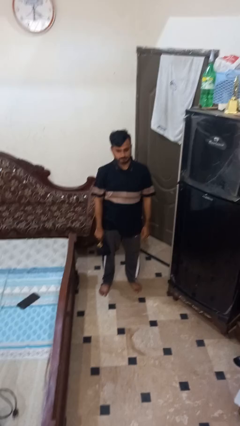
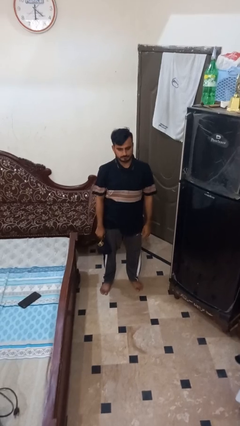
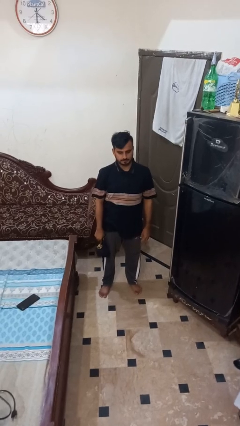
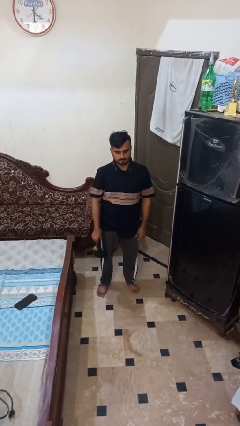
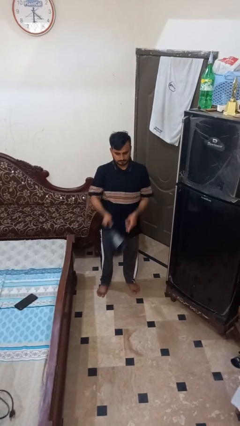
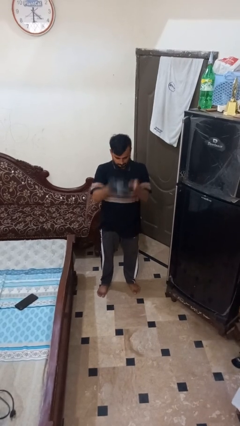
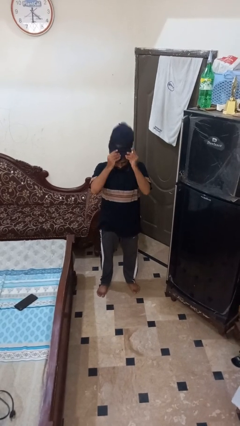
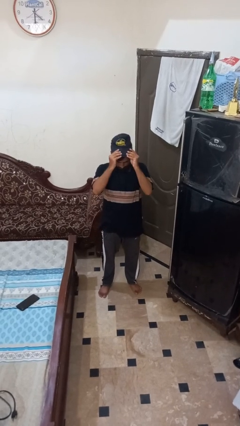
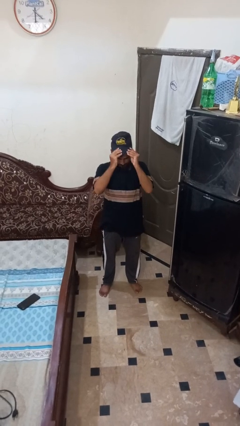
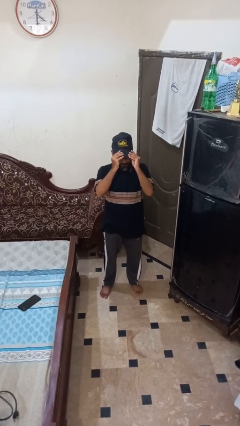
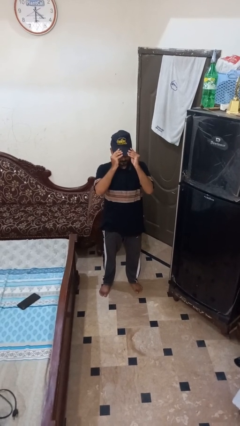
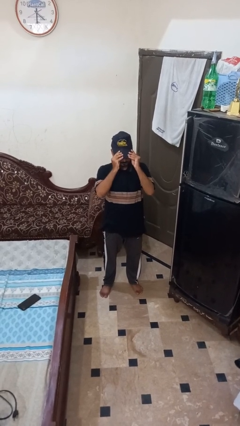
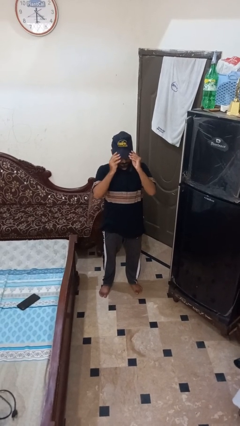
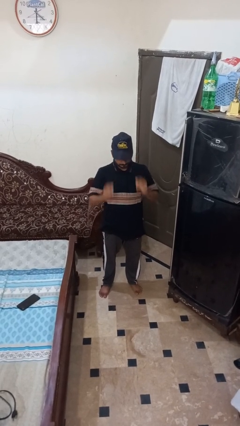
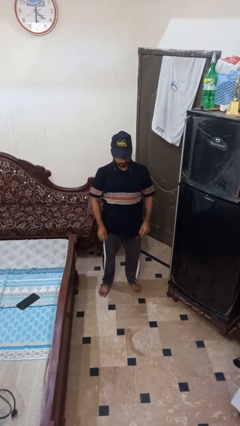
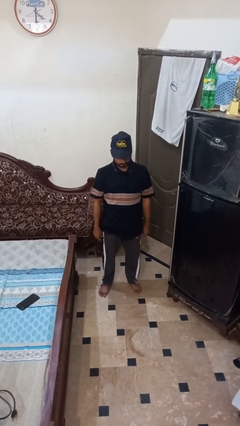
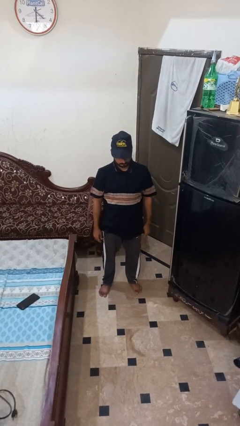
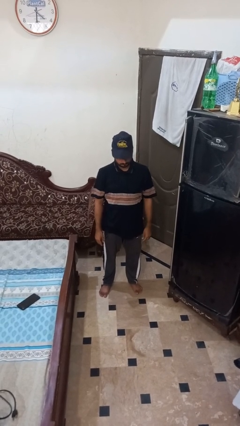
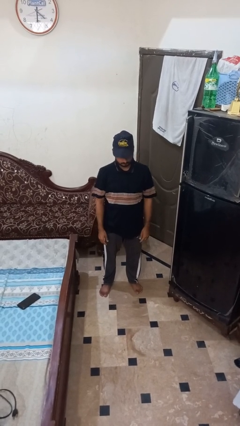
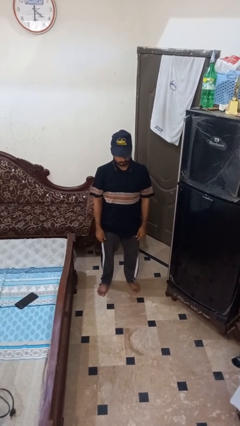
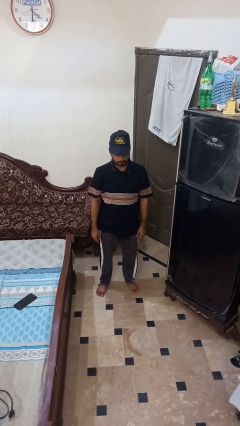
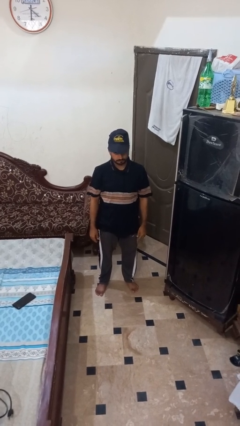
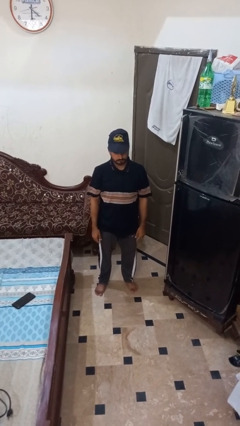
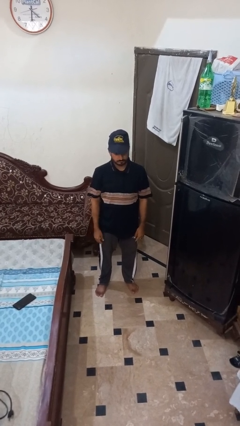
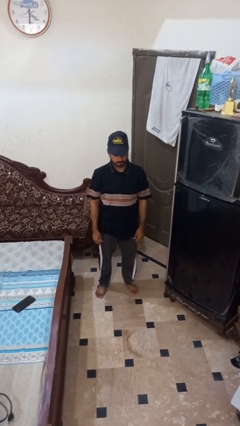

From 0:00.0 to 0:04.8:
person puts on hat

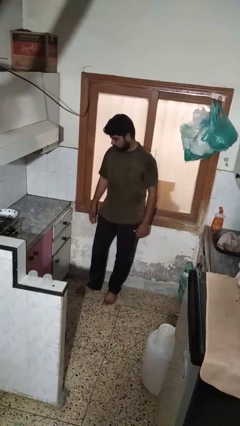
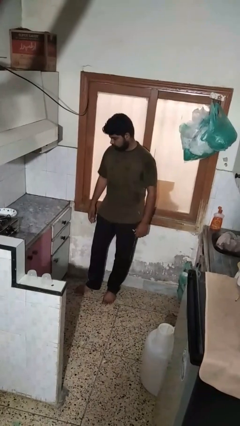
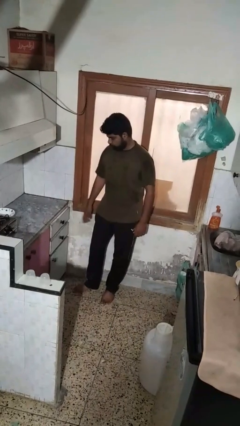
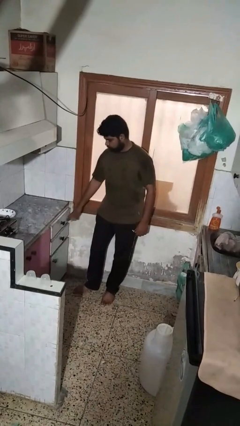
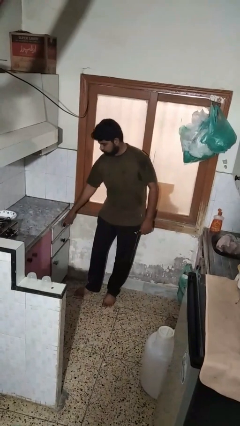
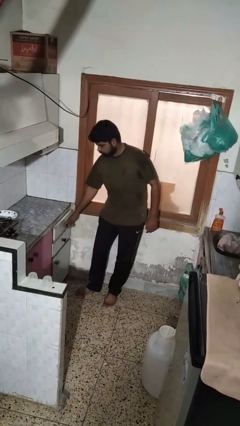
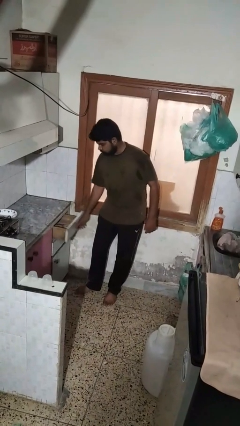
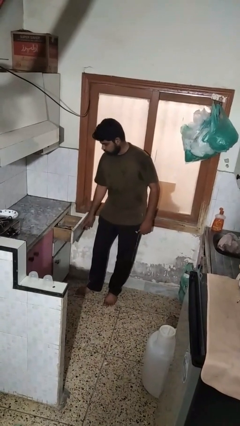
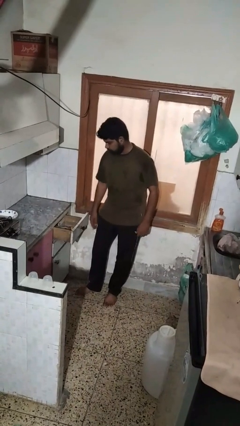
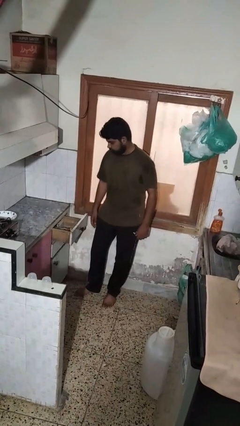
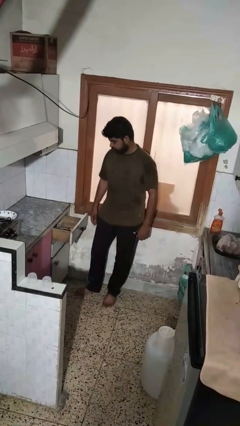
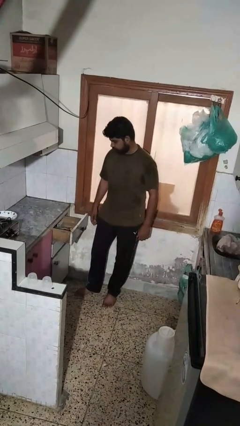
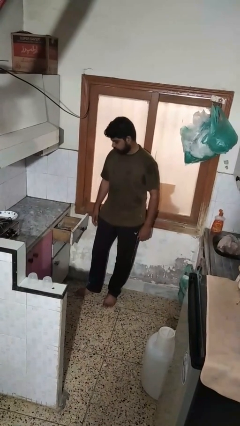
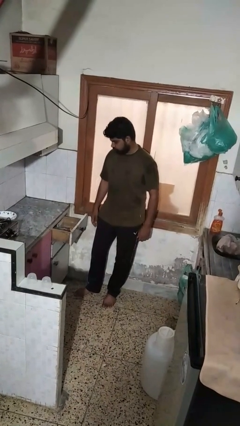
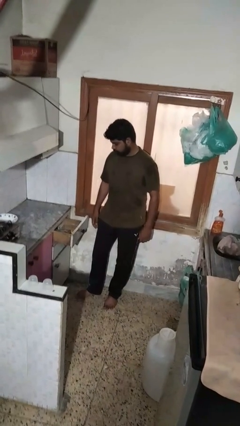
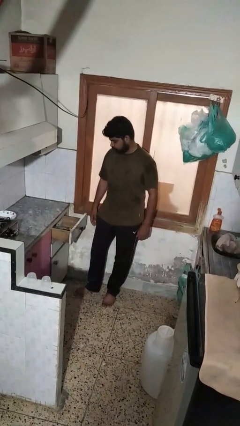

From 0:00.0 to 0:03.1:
person opens kitchen drawer

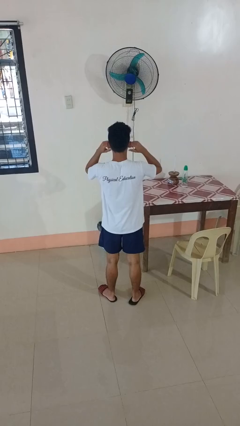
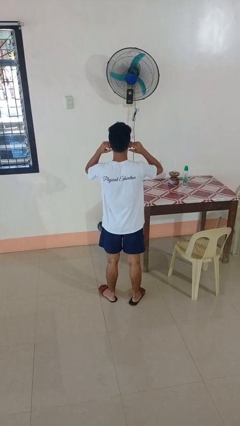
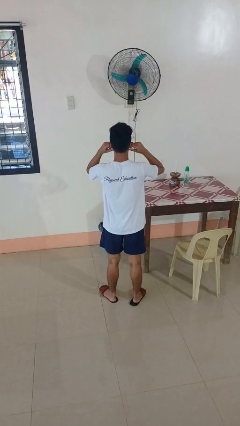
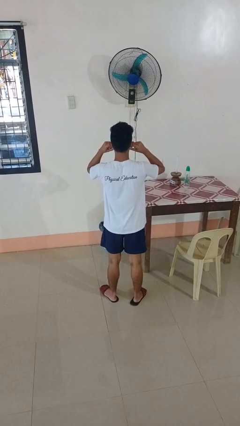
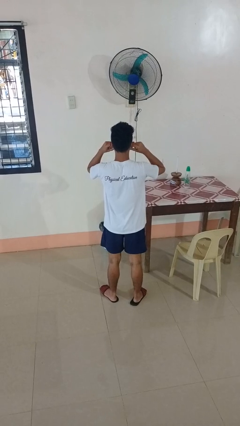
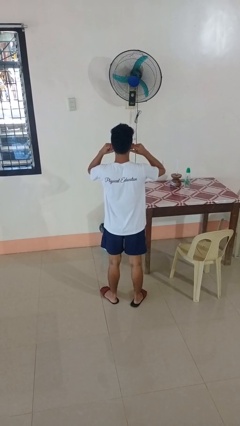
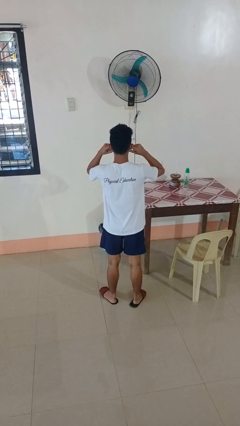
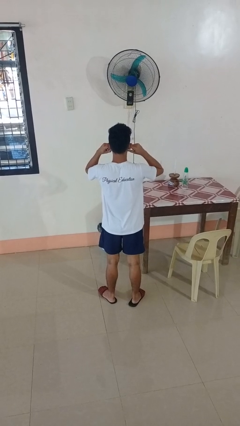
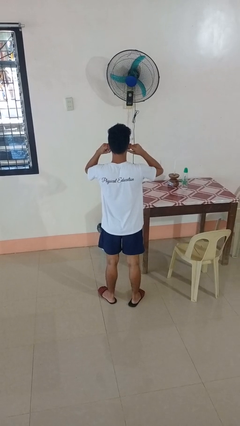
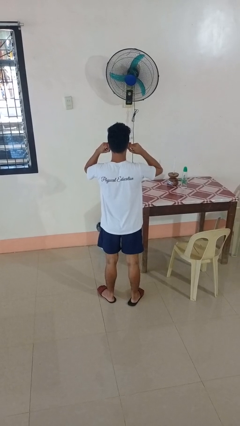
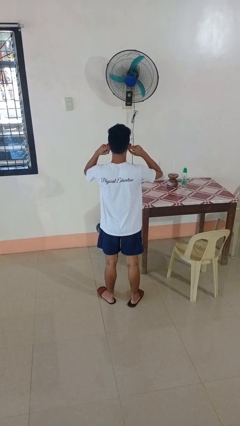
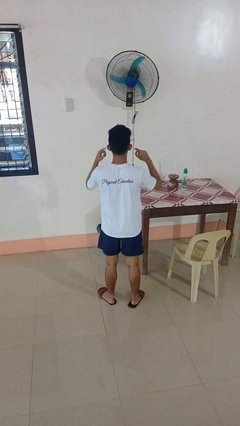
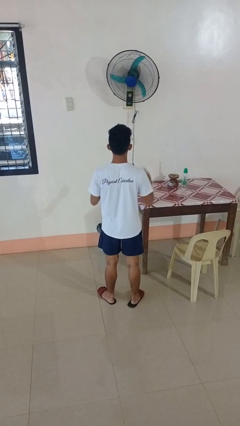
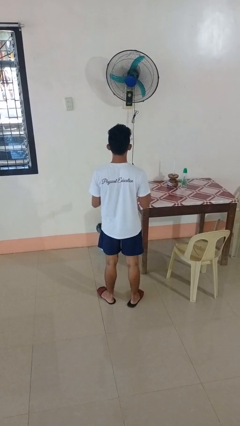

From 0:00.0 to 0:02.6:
person puts fingers in ear

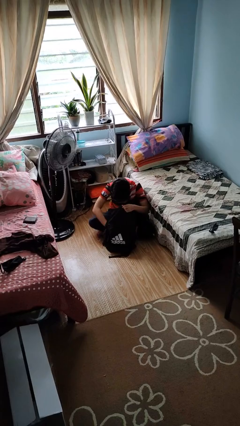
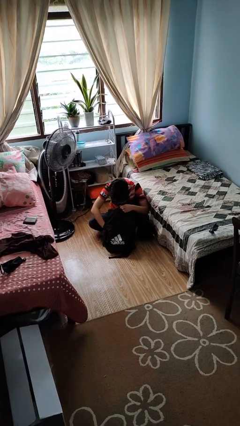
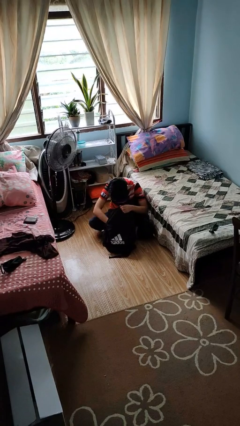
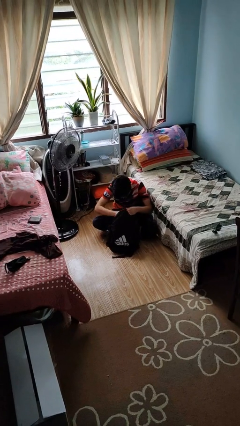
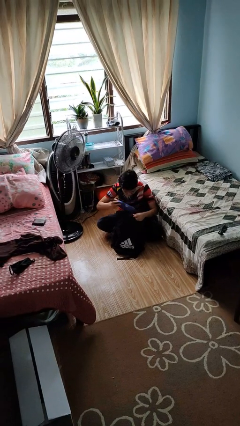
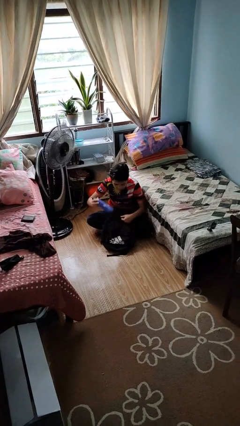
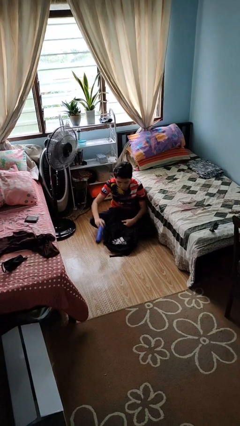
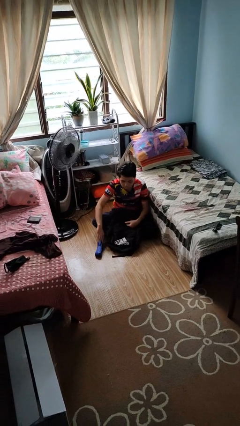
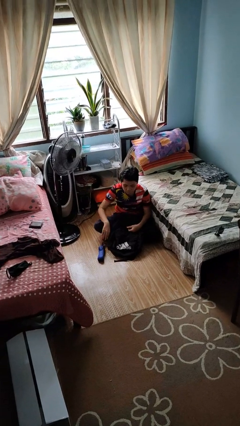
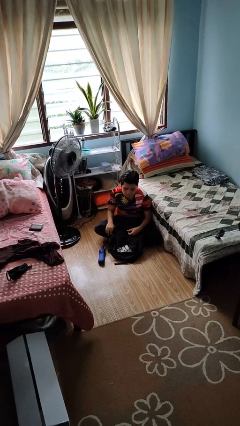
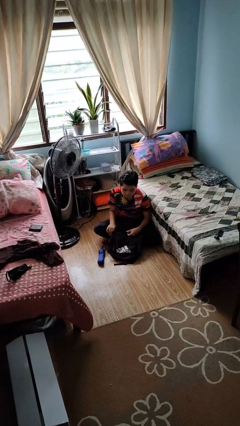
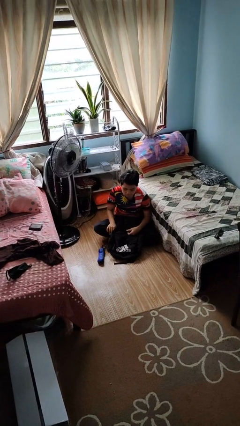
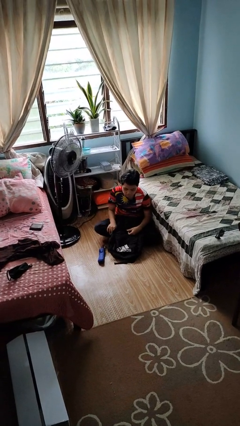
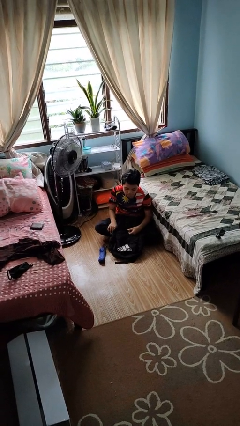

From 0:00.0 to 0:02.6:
person takes object from backpack

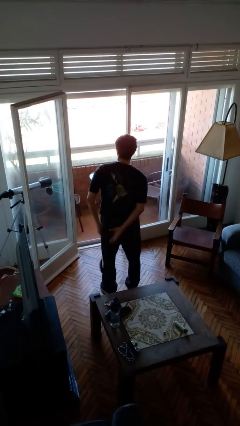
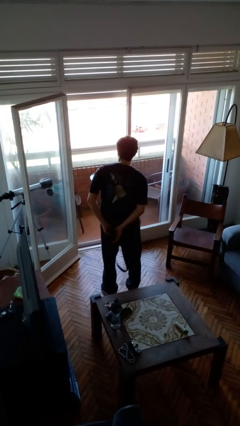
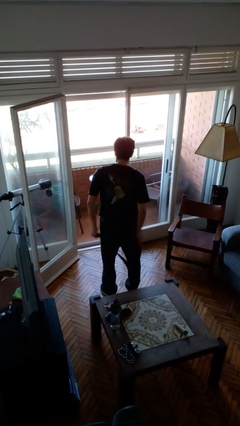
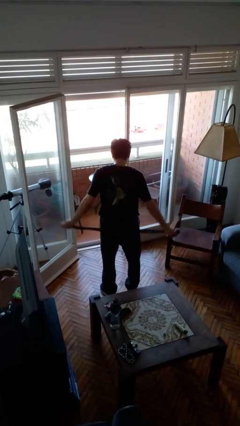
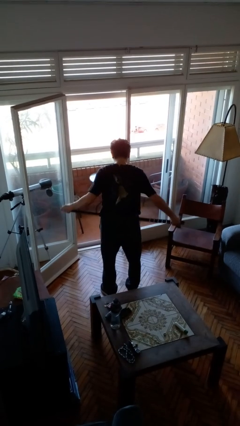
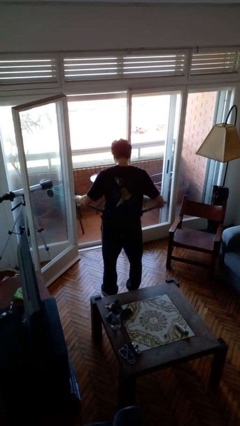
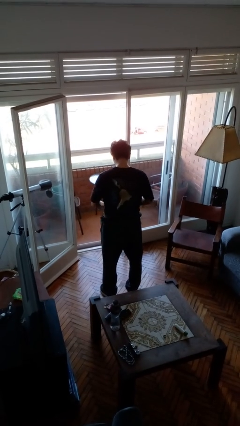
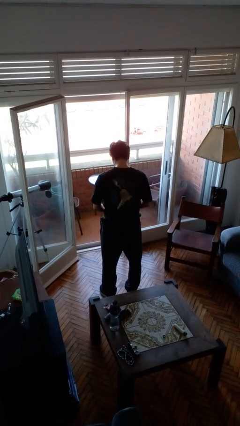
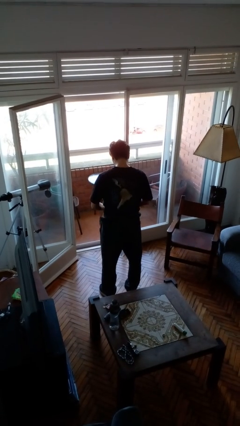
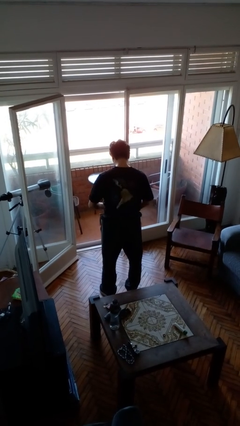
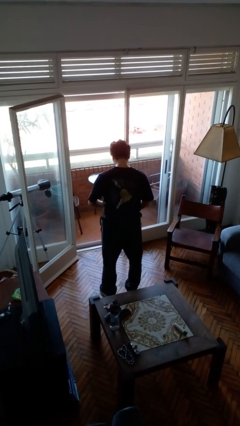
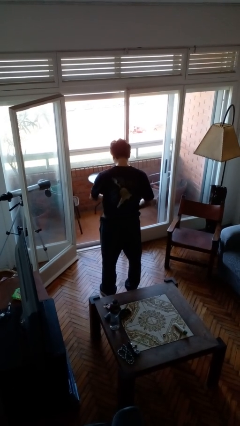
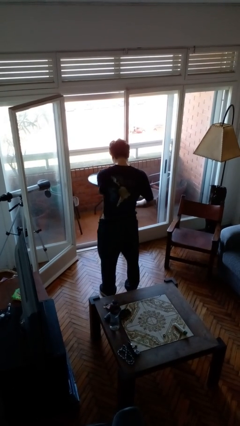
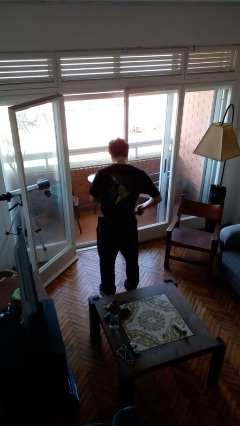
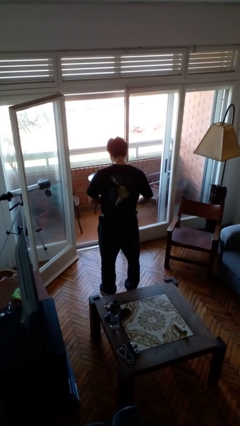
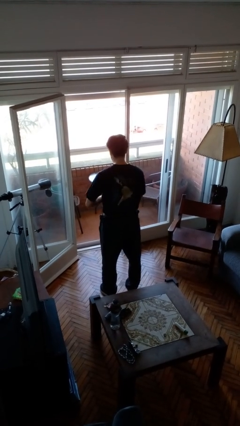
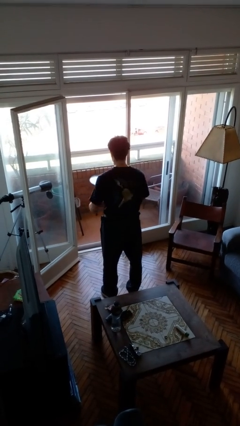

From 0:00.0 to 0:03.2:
person puts on belt

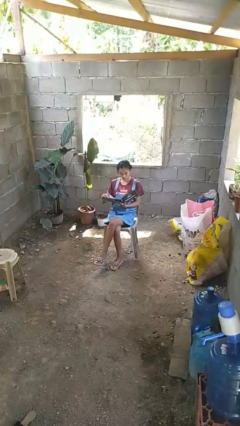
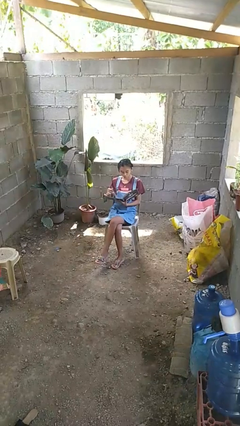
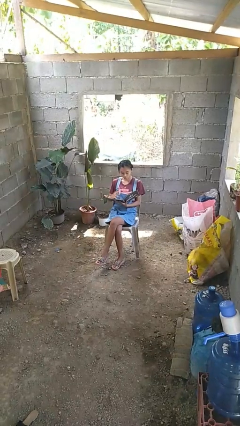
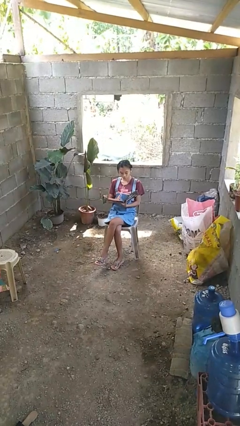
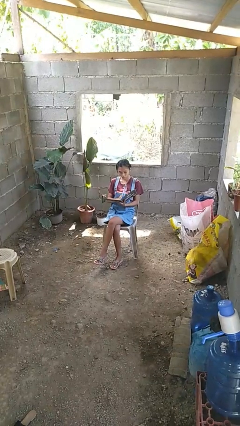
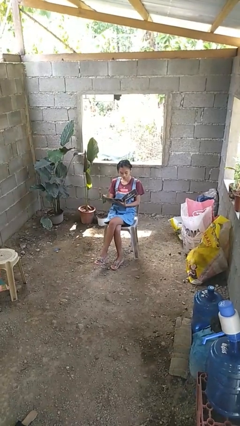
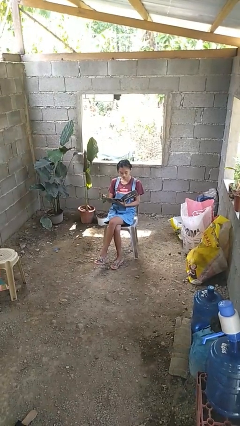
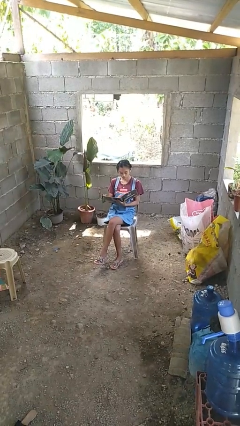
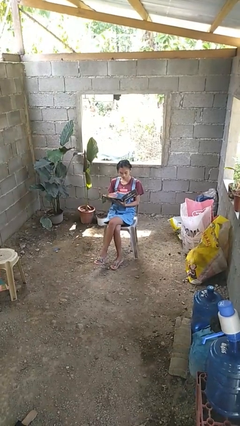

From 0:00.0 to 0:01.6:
person reads magazine
